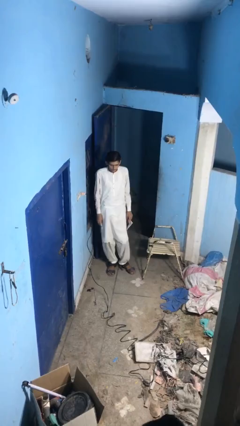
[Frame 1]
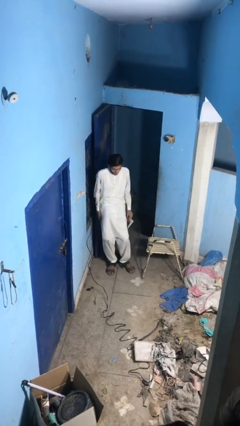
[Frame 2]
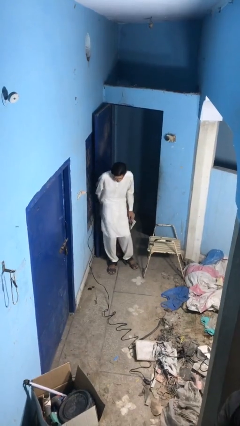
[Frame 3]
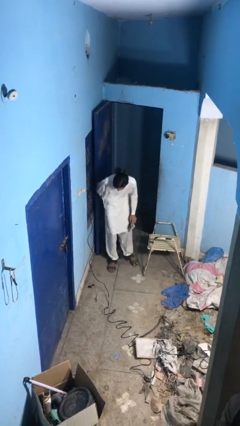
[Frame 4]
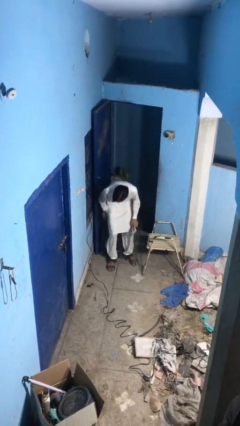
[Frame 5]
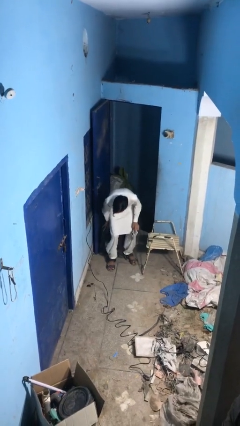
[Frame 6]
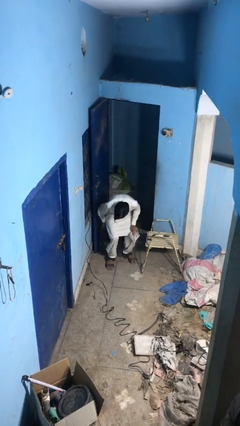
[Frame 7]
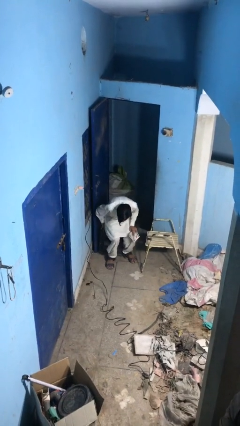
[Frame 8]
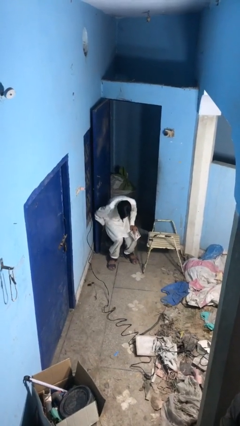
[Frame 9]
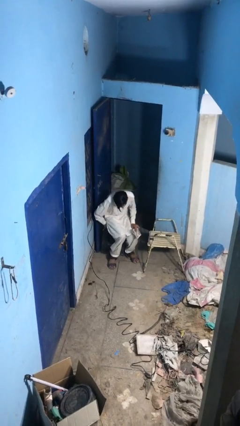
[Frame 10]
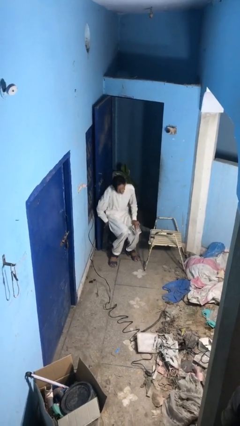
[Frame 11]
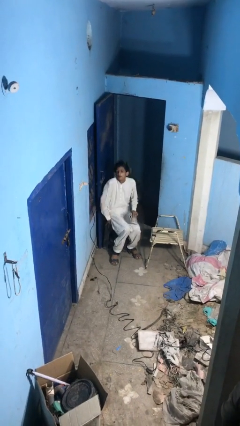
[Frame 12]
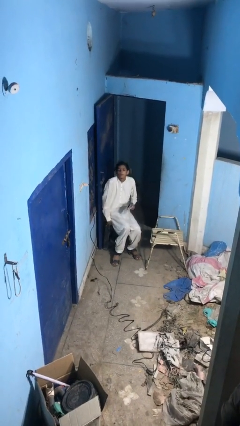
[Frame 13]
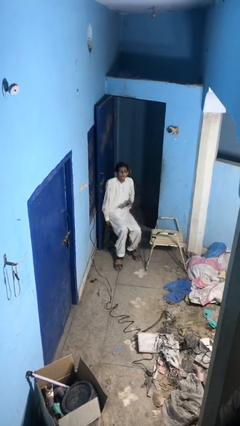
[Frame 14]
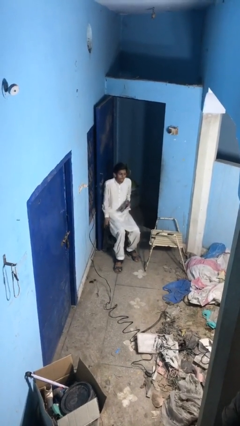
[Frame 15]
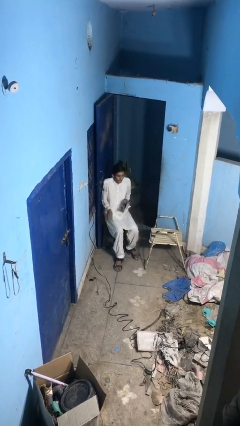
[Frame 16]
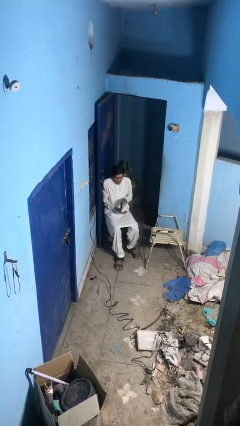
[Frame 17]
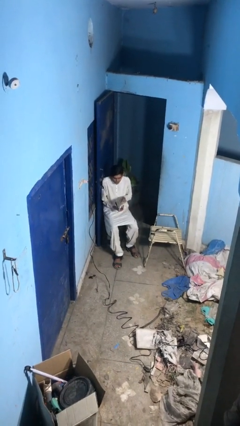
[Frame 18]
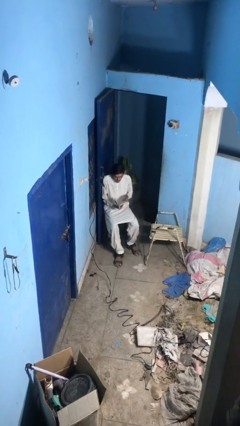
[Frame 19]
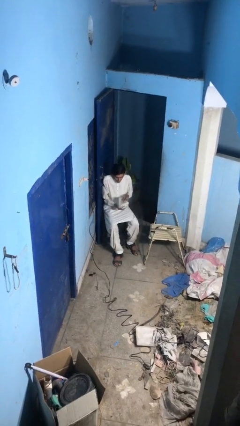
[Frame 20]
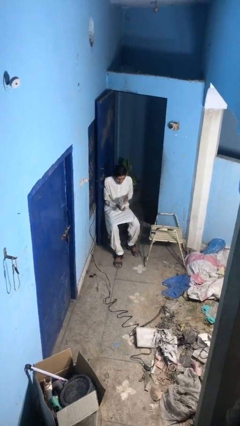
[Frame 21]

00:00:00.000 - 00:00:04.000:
person sits down

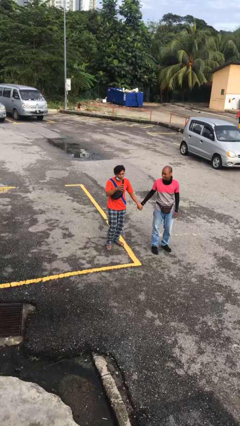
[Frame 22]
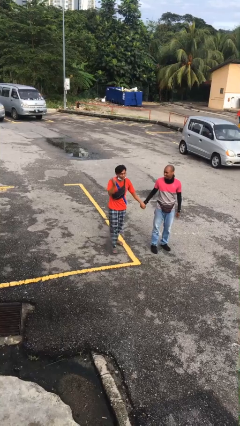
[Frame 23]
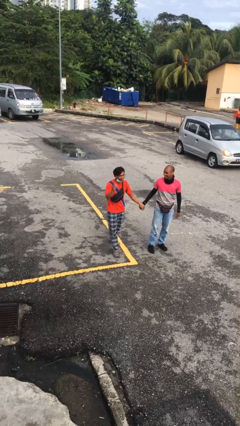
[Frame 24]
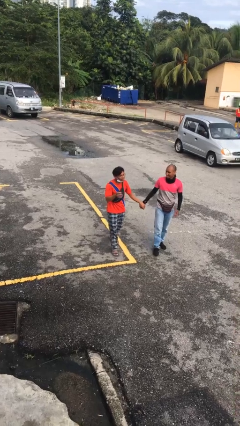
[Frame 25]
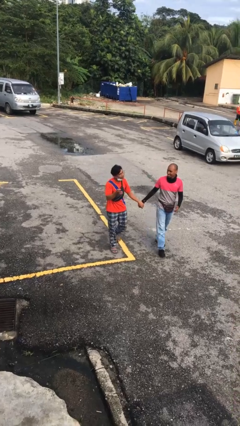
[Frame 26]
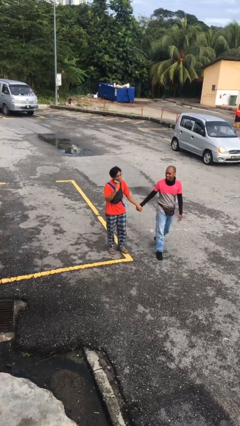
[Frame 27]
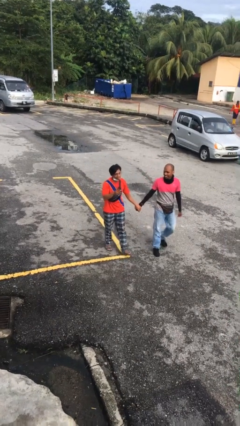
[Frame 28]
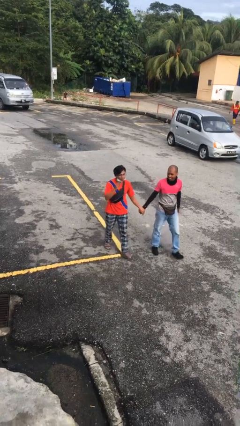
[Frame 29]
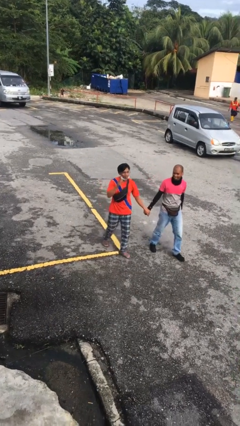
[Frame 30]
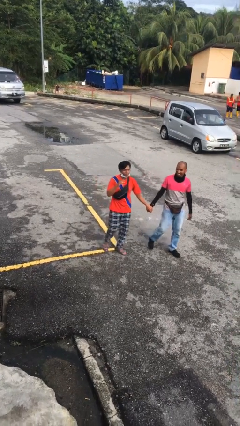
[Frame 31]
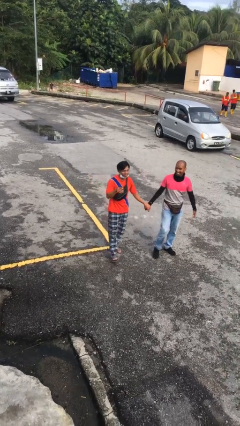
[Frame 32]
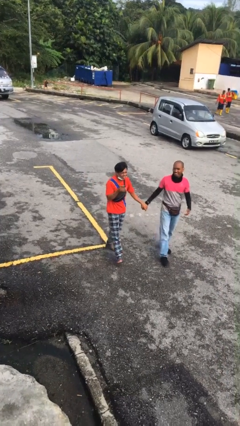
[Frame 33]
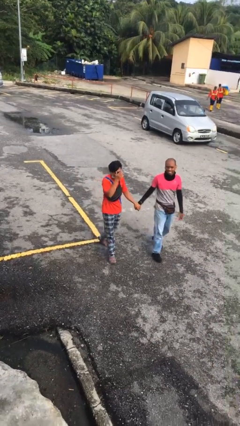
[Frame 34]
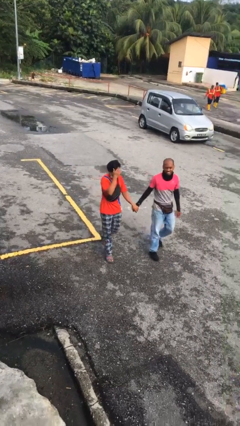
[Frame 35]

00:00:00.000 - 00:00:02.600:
person holds hand

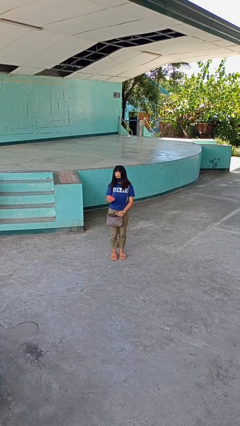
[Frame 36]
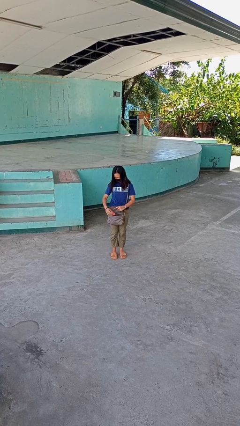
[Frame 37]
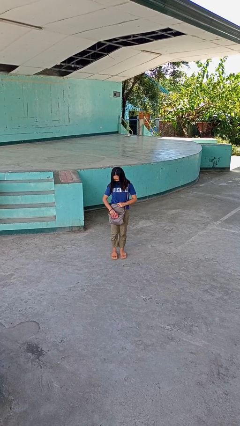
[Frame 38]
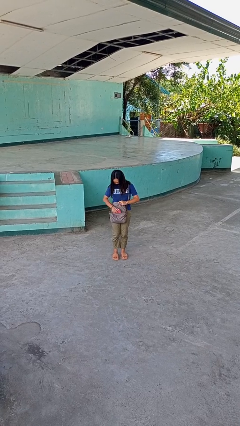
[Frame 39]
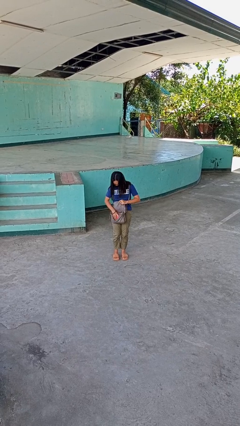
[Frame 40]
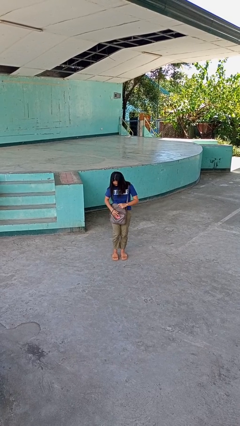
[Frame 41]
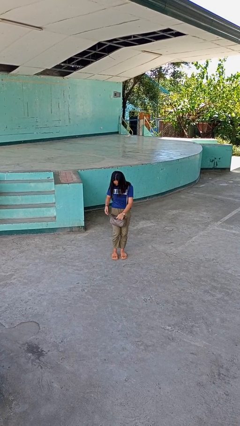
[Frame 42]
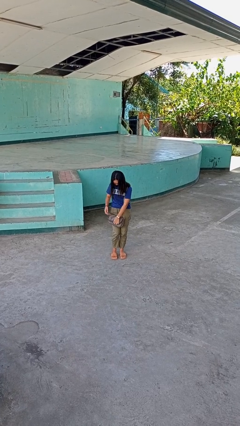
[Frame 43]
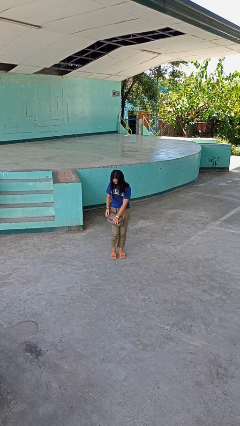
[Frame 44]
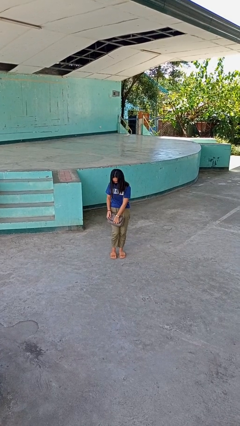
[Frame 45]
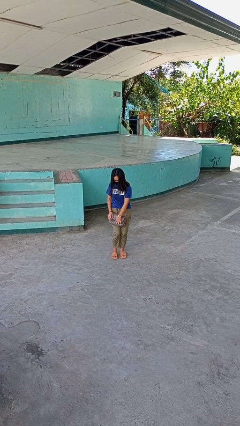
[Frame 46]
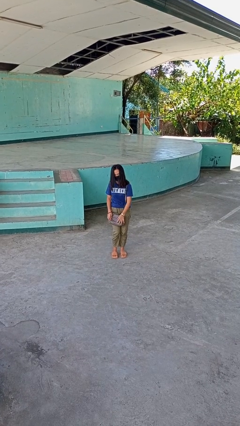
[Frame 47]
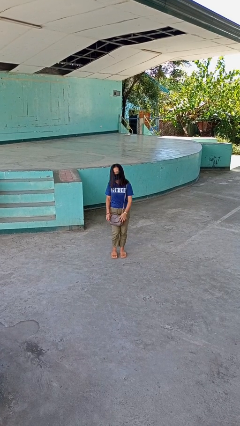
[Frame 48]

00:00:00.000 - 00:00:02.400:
person puts object into purse

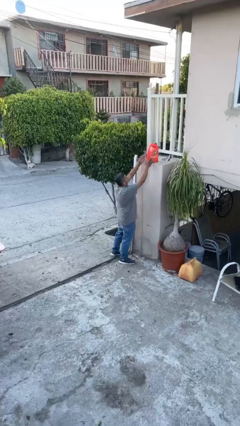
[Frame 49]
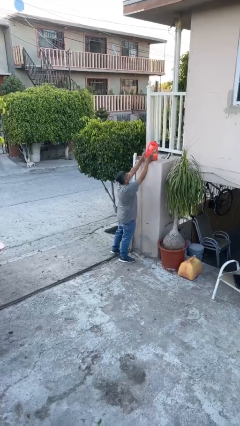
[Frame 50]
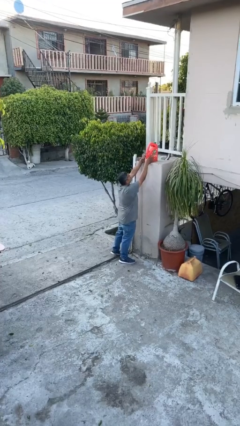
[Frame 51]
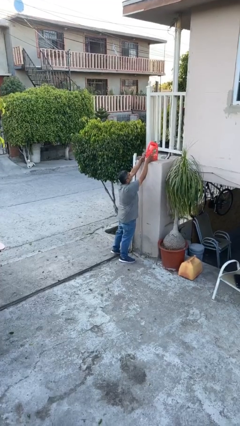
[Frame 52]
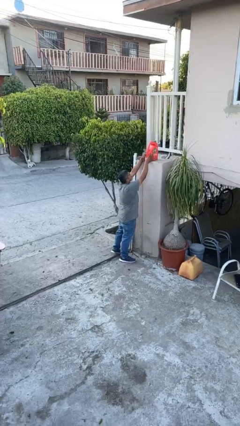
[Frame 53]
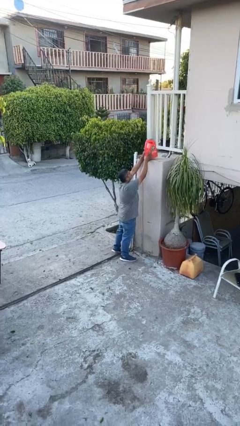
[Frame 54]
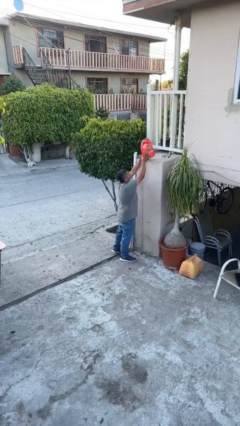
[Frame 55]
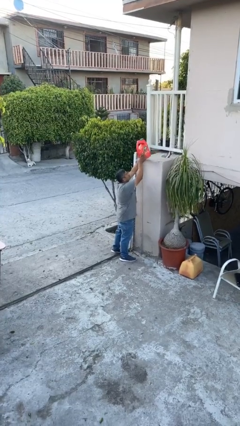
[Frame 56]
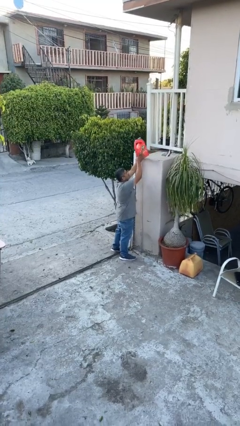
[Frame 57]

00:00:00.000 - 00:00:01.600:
person picks up object from shelf

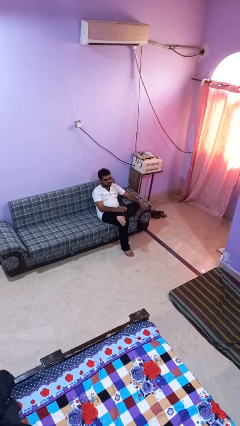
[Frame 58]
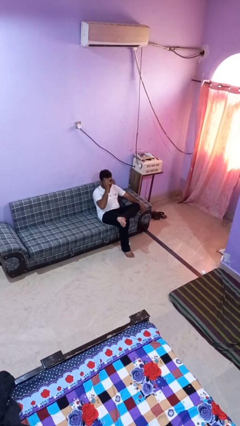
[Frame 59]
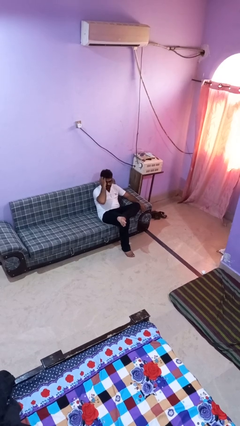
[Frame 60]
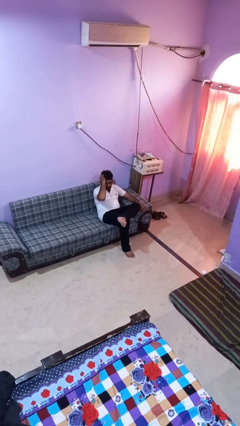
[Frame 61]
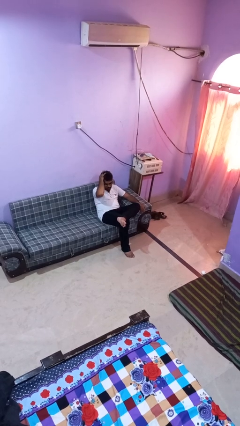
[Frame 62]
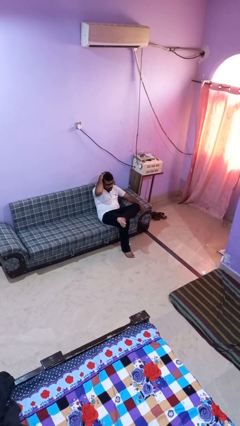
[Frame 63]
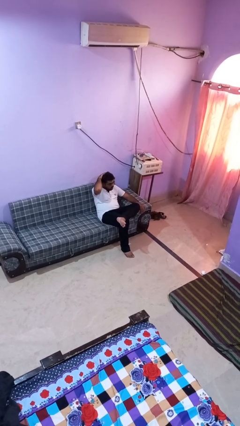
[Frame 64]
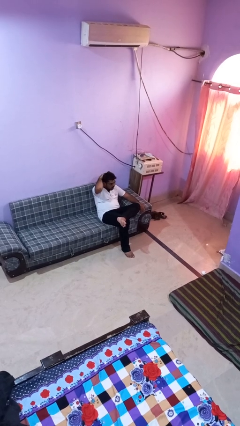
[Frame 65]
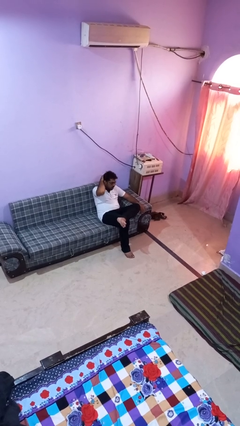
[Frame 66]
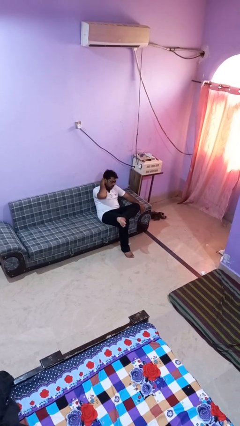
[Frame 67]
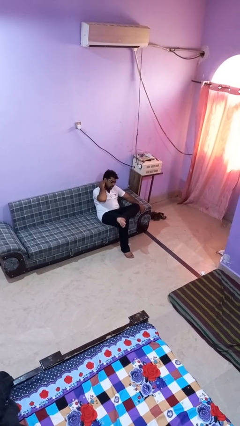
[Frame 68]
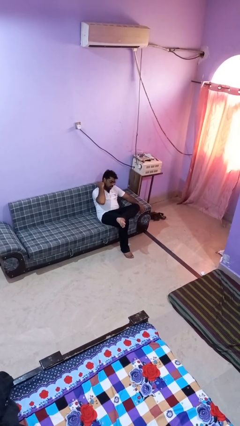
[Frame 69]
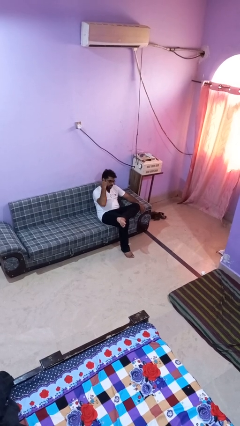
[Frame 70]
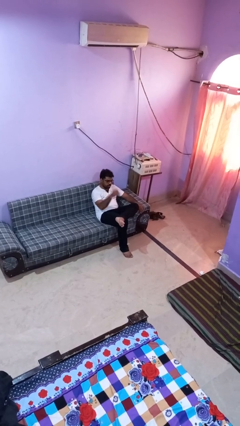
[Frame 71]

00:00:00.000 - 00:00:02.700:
person strokes hair

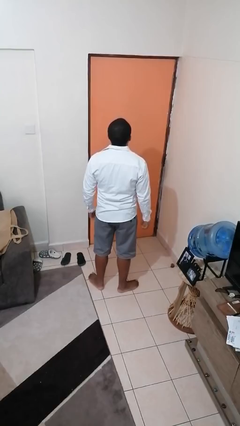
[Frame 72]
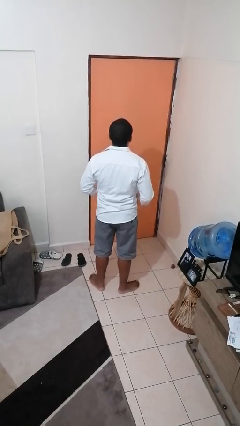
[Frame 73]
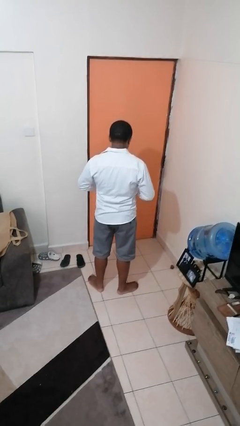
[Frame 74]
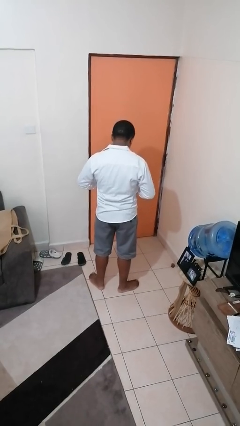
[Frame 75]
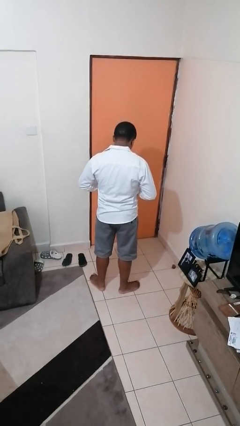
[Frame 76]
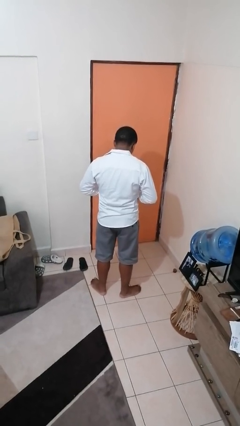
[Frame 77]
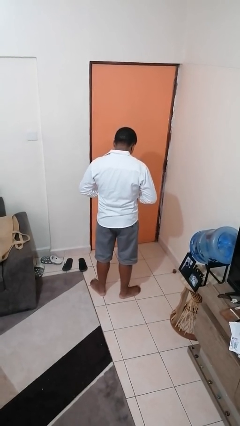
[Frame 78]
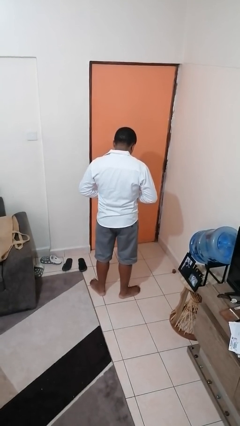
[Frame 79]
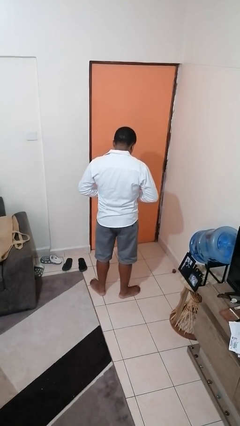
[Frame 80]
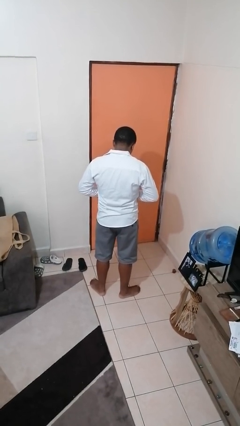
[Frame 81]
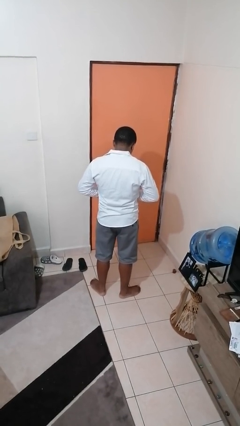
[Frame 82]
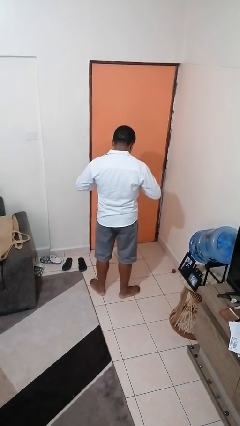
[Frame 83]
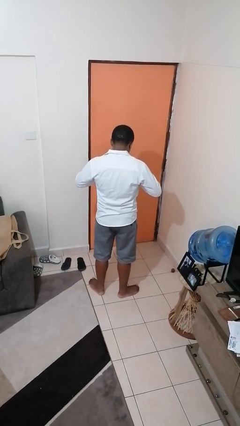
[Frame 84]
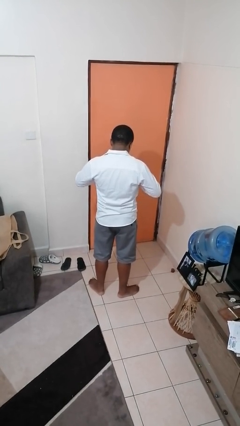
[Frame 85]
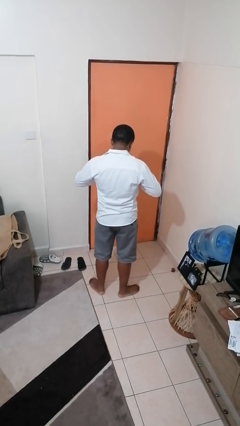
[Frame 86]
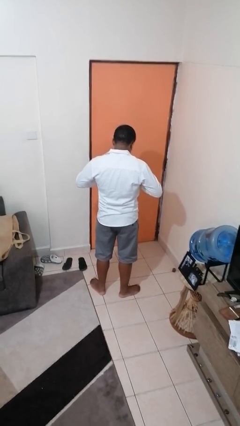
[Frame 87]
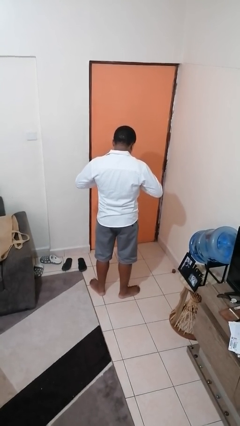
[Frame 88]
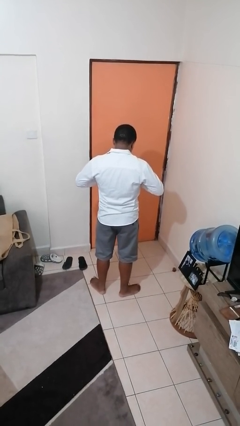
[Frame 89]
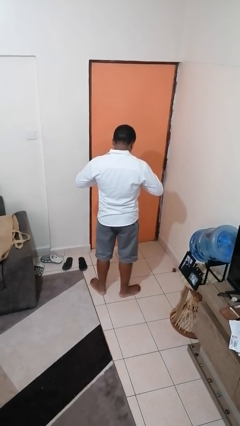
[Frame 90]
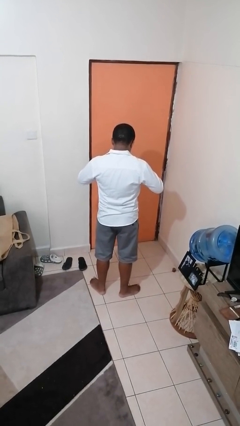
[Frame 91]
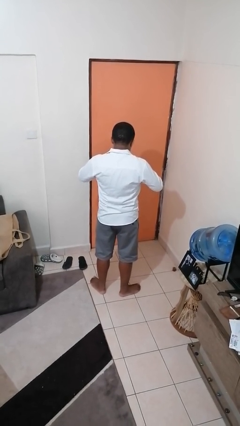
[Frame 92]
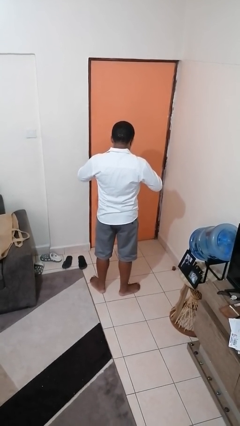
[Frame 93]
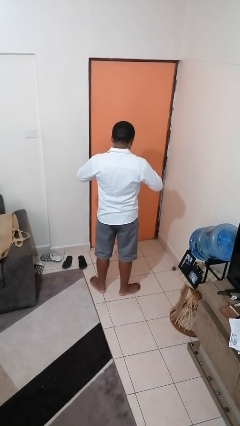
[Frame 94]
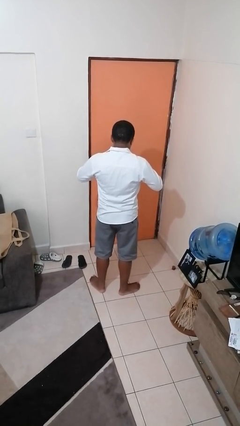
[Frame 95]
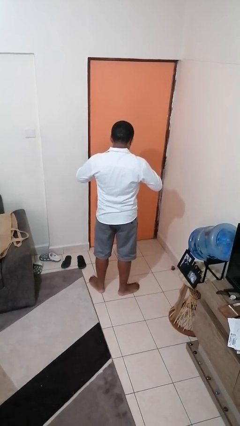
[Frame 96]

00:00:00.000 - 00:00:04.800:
person buttons shirt
